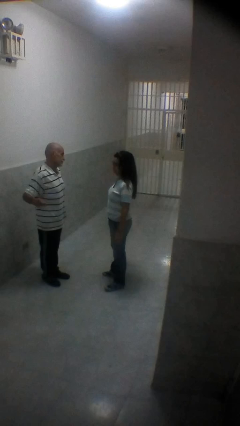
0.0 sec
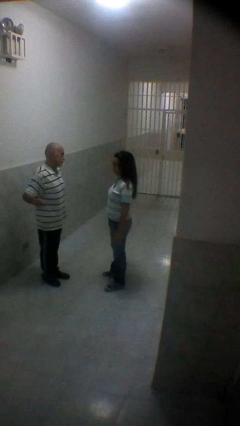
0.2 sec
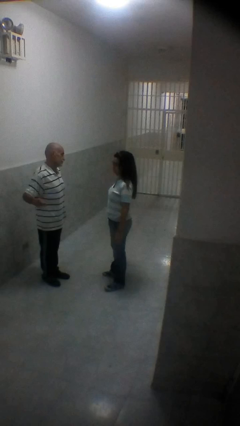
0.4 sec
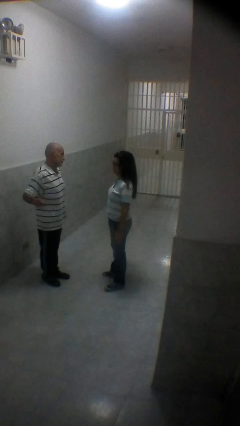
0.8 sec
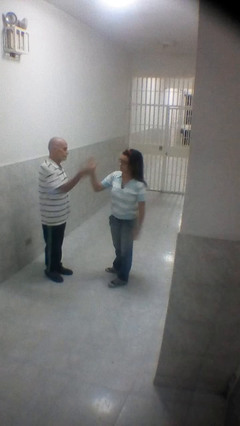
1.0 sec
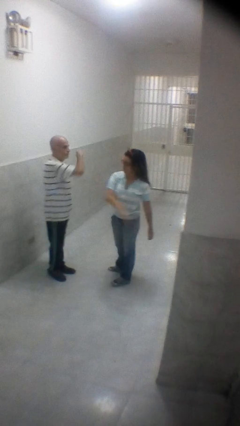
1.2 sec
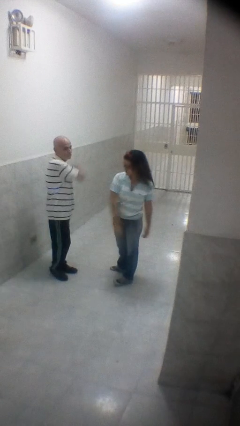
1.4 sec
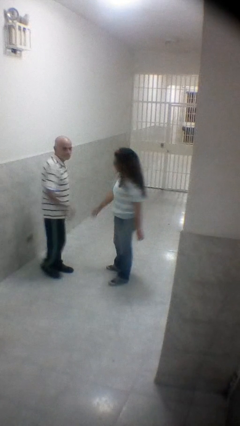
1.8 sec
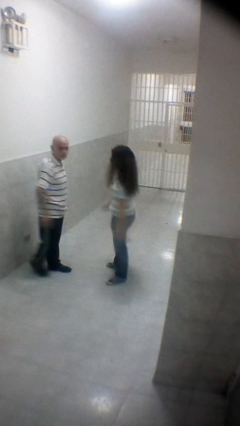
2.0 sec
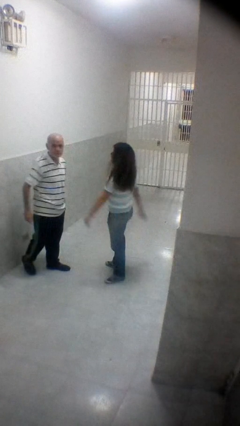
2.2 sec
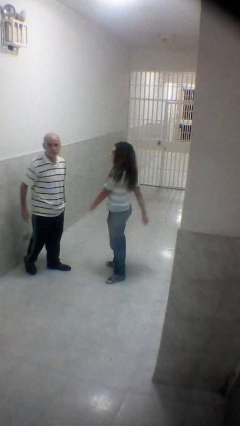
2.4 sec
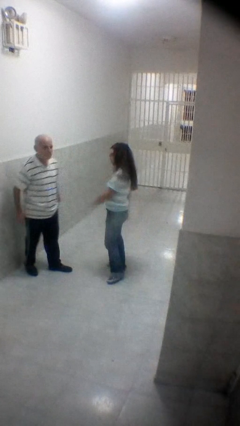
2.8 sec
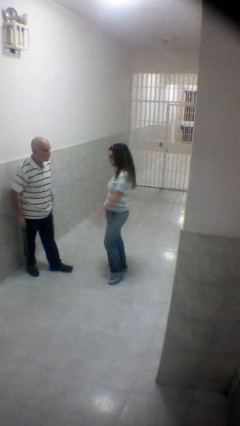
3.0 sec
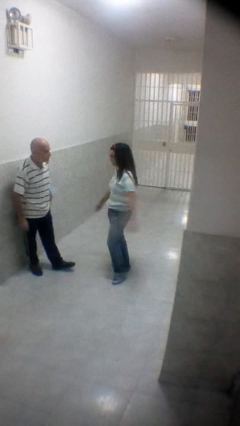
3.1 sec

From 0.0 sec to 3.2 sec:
person highfives hand

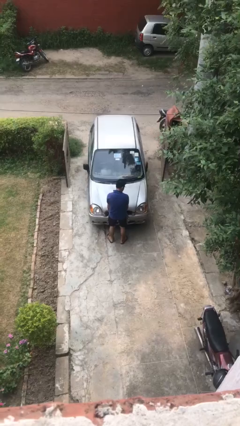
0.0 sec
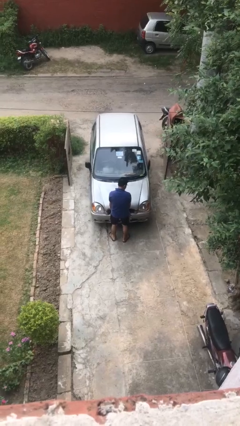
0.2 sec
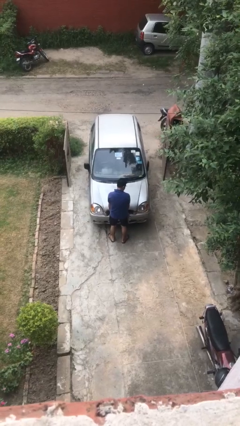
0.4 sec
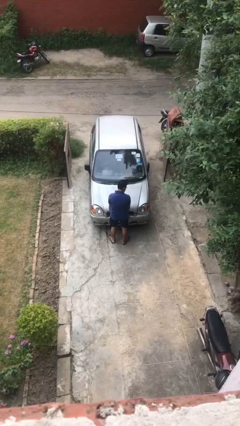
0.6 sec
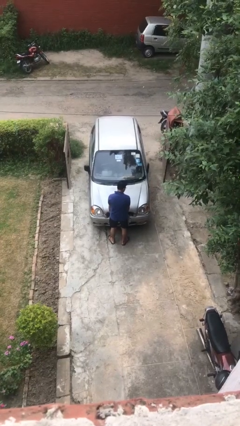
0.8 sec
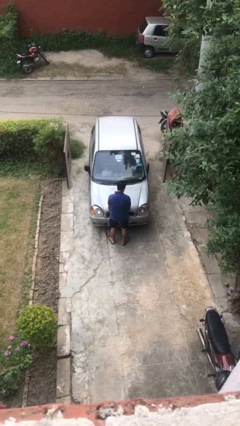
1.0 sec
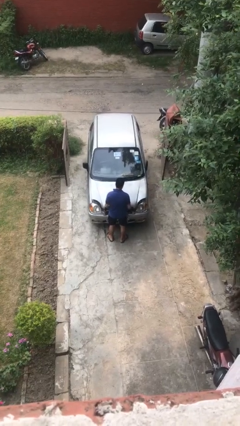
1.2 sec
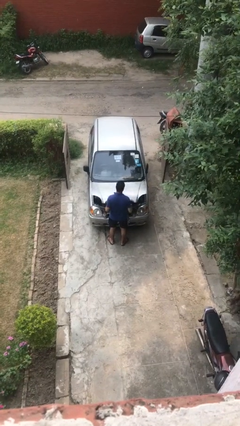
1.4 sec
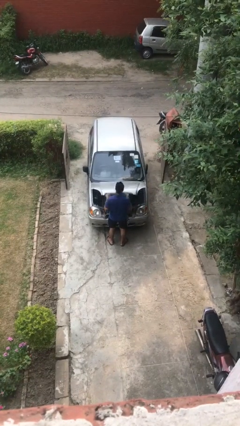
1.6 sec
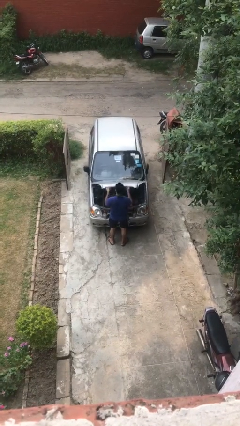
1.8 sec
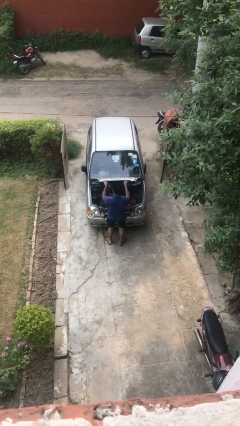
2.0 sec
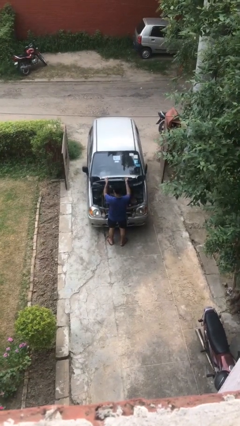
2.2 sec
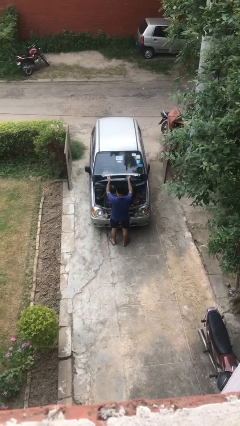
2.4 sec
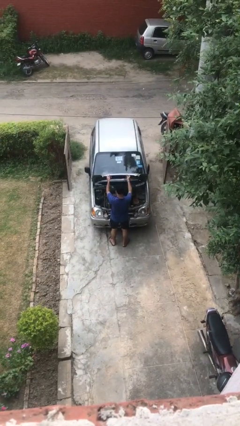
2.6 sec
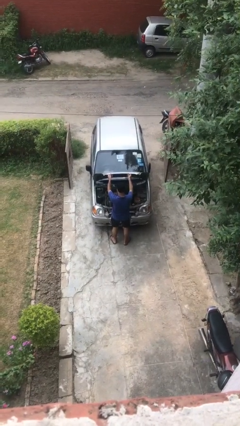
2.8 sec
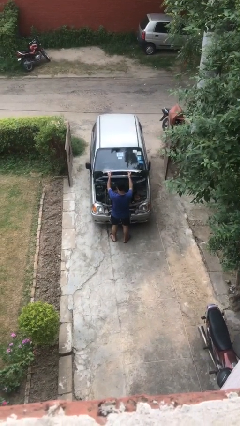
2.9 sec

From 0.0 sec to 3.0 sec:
person opens car hood

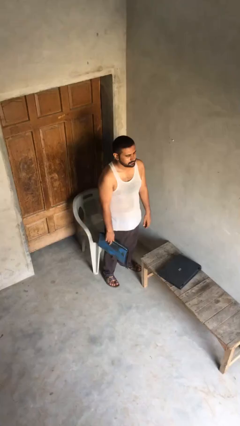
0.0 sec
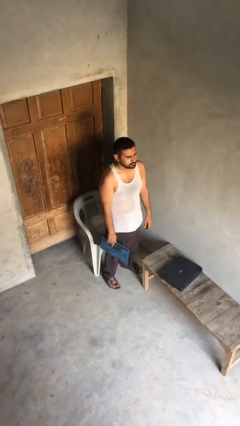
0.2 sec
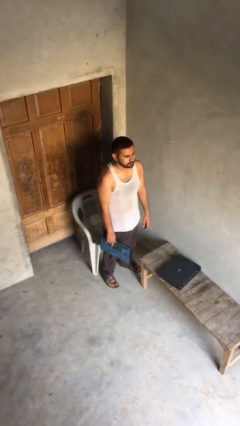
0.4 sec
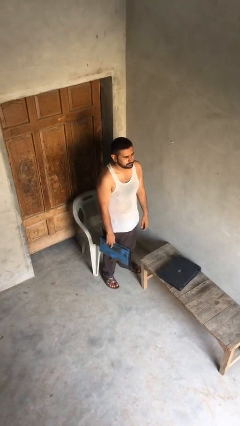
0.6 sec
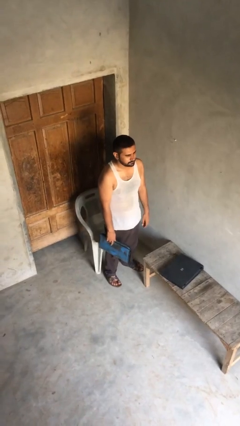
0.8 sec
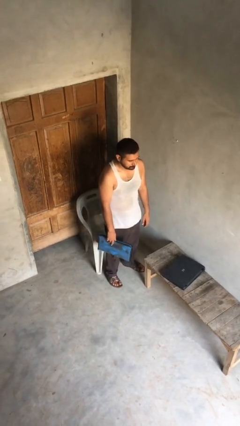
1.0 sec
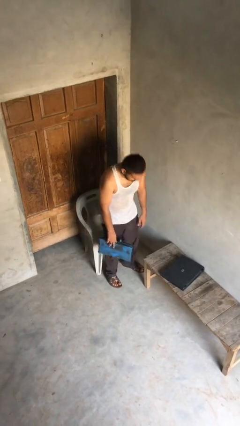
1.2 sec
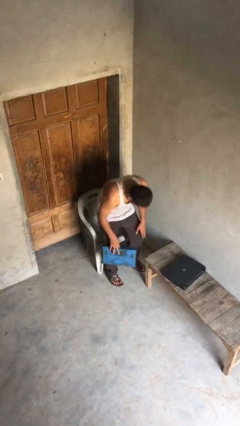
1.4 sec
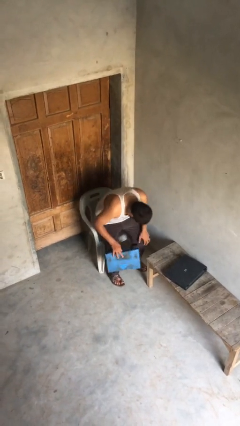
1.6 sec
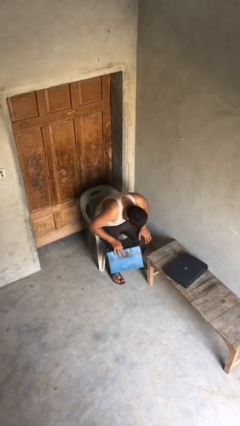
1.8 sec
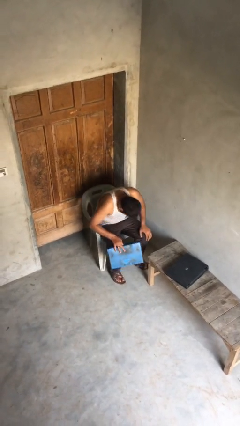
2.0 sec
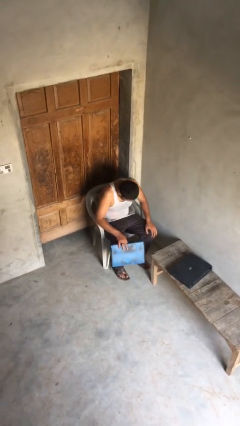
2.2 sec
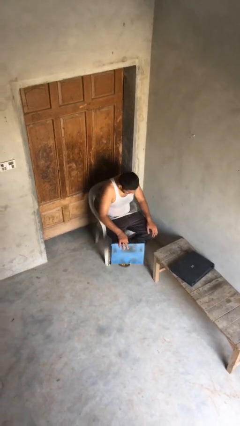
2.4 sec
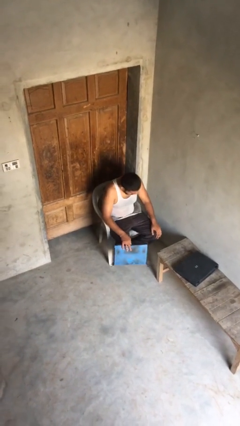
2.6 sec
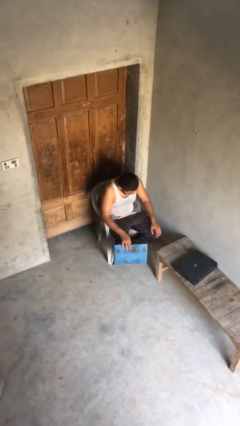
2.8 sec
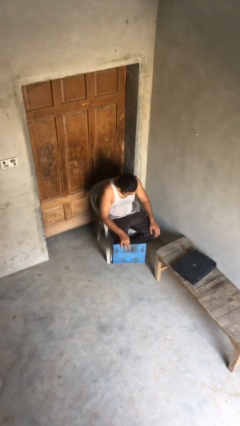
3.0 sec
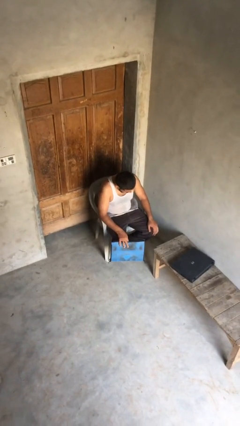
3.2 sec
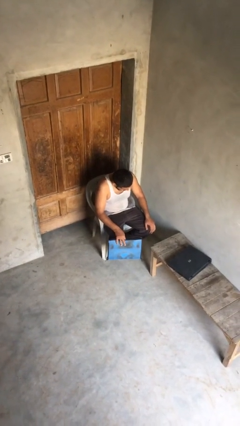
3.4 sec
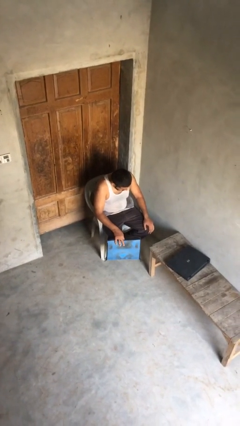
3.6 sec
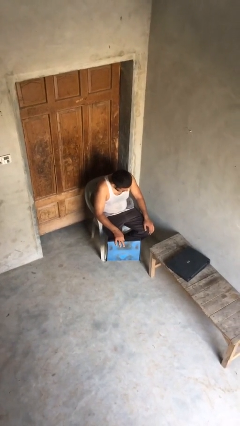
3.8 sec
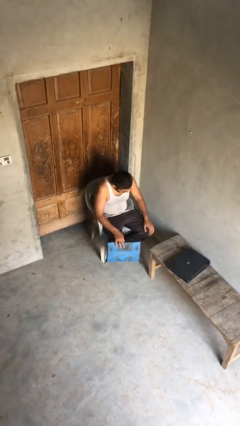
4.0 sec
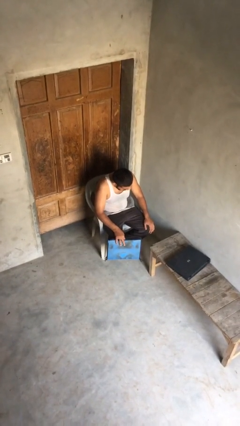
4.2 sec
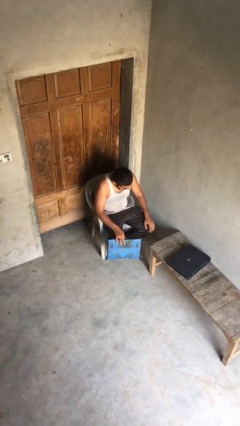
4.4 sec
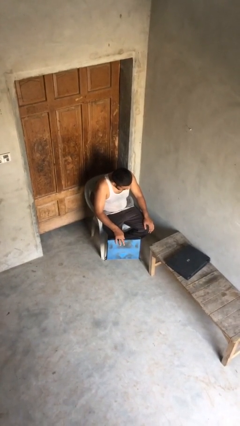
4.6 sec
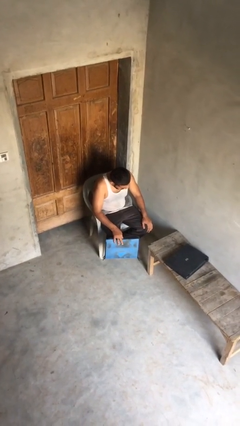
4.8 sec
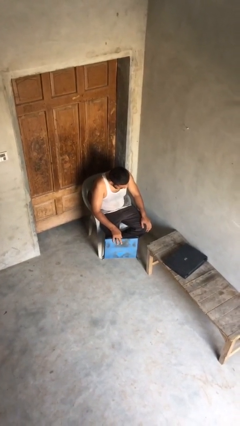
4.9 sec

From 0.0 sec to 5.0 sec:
person sits down

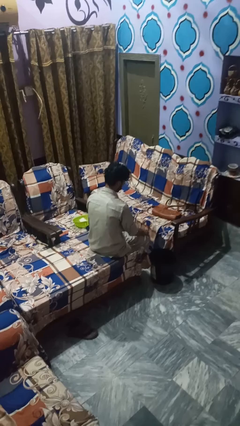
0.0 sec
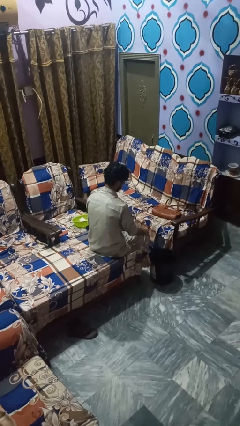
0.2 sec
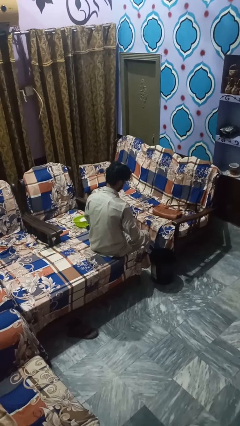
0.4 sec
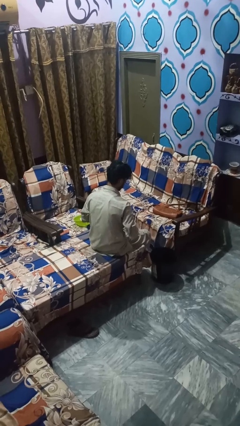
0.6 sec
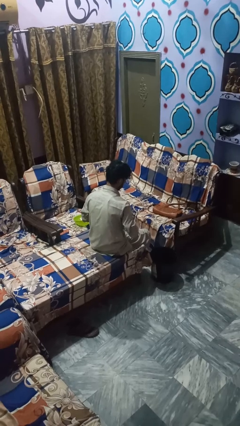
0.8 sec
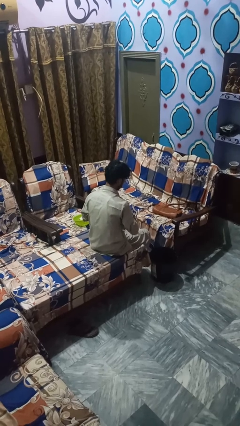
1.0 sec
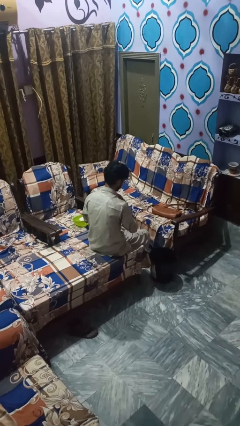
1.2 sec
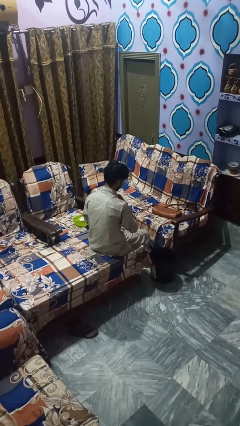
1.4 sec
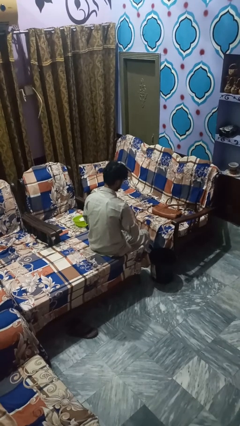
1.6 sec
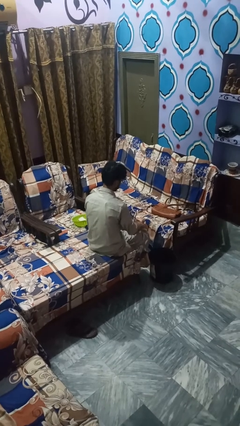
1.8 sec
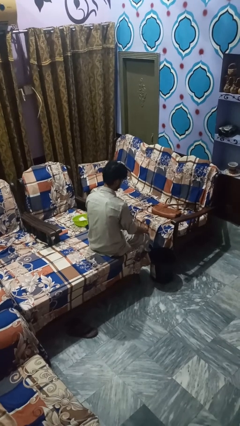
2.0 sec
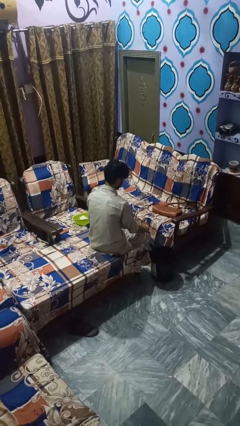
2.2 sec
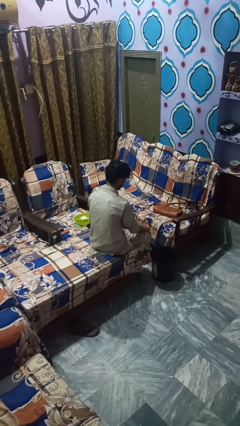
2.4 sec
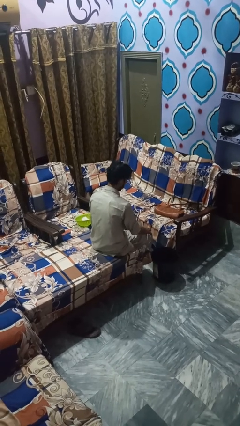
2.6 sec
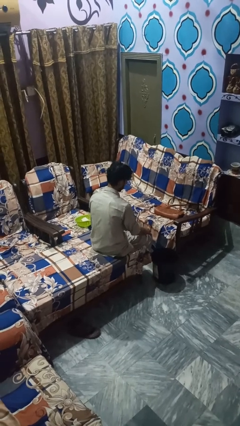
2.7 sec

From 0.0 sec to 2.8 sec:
person buttons shirt

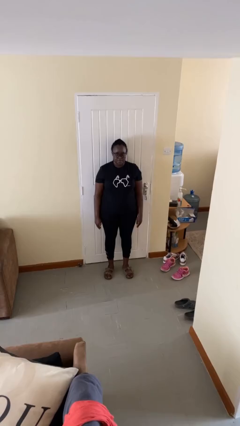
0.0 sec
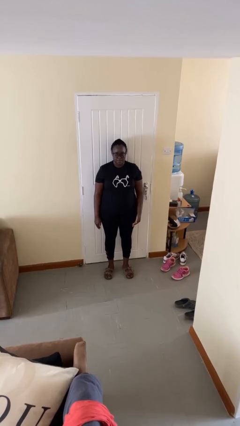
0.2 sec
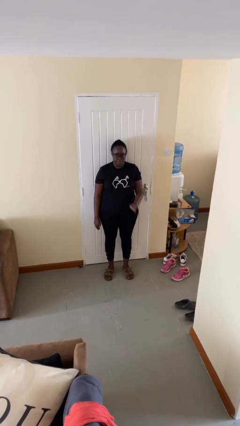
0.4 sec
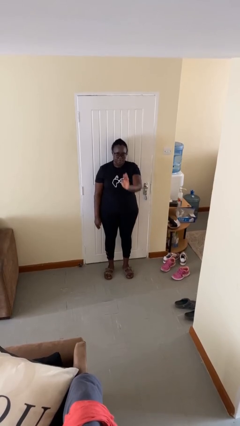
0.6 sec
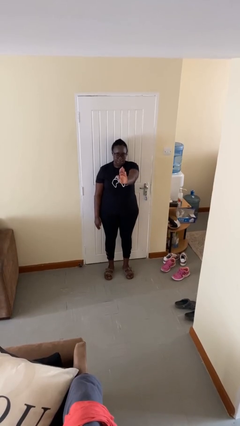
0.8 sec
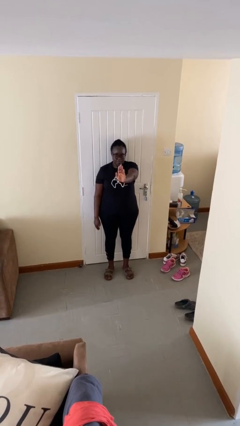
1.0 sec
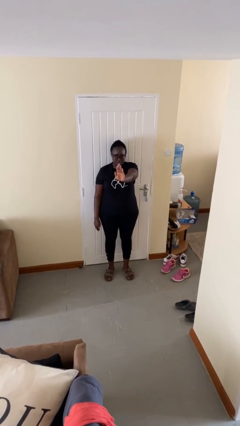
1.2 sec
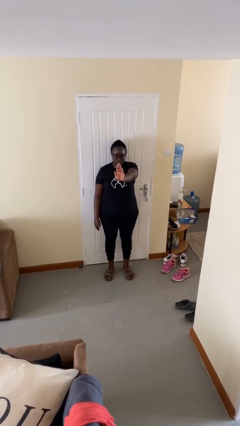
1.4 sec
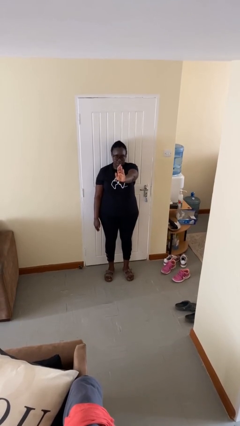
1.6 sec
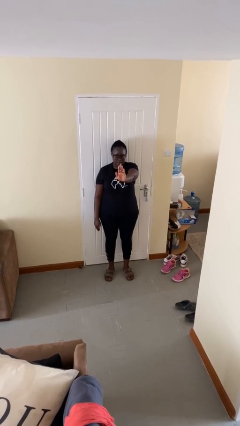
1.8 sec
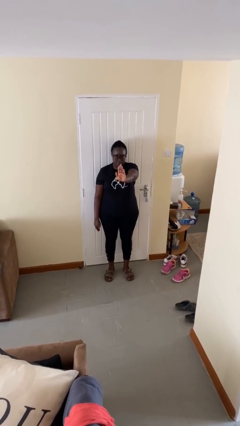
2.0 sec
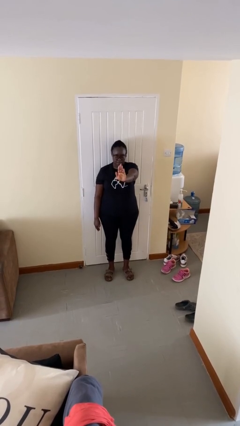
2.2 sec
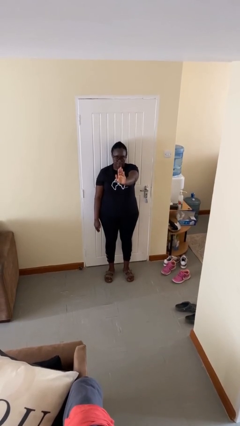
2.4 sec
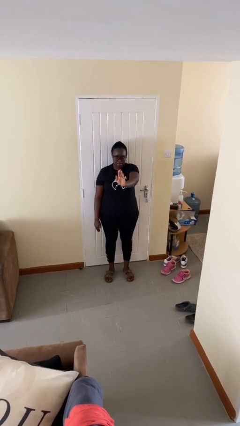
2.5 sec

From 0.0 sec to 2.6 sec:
person gestures stop

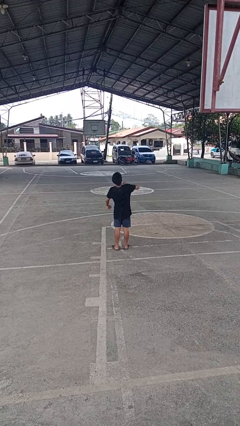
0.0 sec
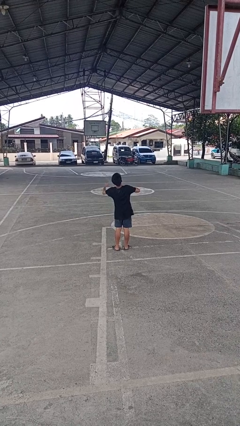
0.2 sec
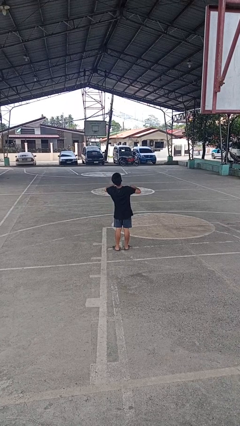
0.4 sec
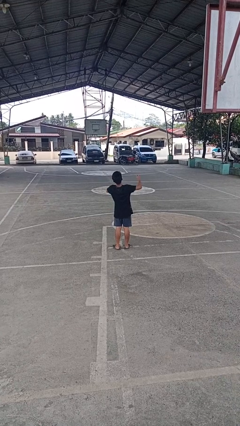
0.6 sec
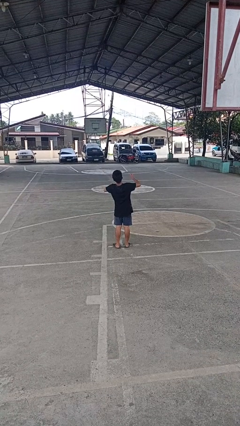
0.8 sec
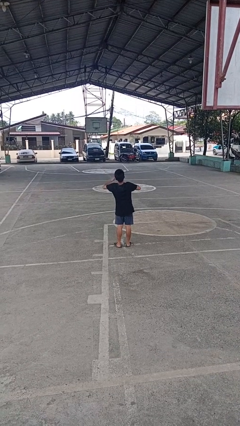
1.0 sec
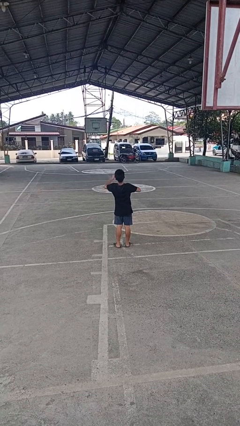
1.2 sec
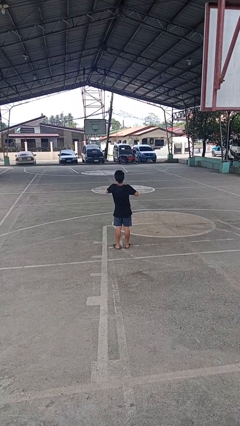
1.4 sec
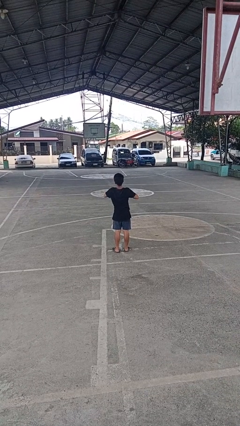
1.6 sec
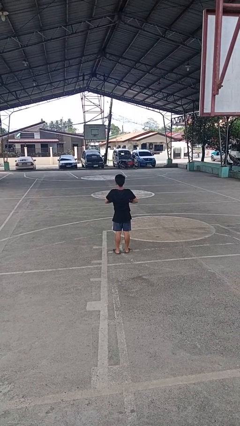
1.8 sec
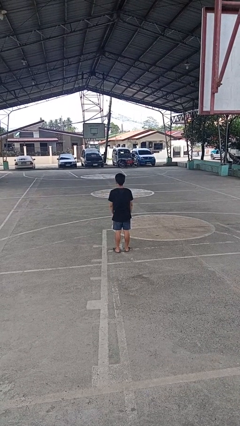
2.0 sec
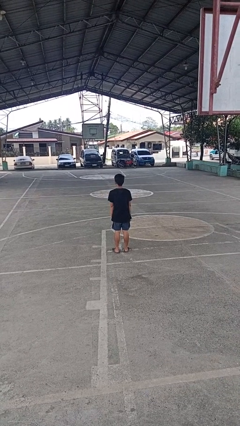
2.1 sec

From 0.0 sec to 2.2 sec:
person drums on chest
